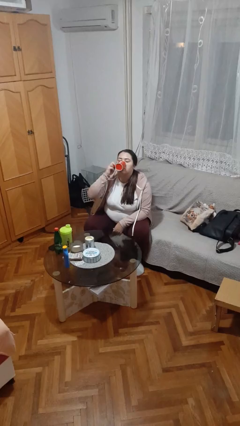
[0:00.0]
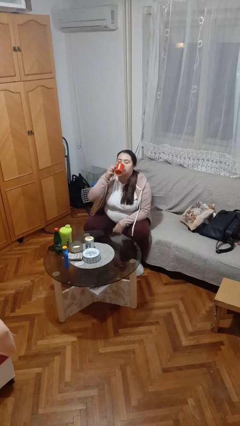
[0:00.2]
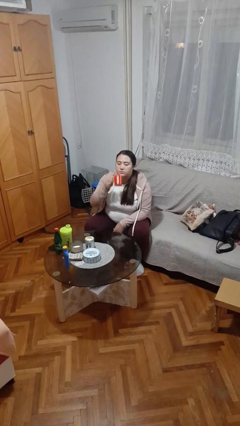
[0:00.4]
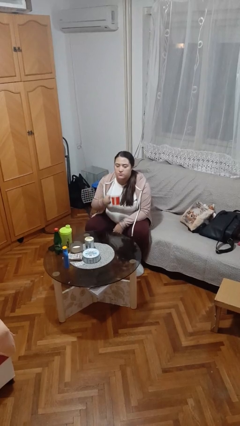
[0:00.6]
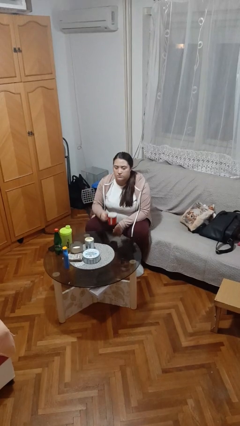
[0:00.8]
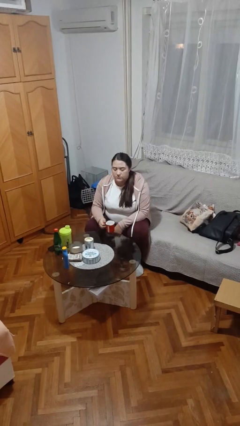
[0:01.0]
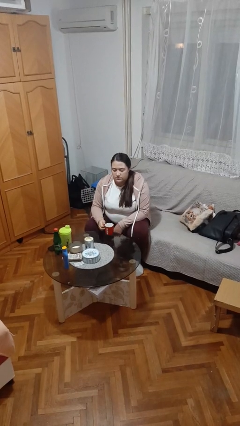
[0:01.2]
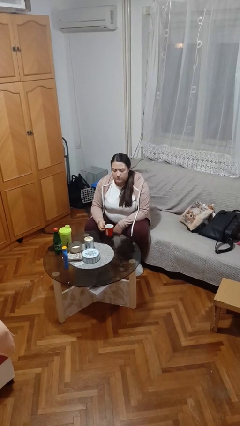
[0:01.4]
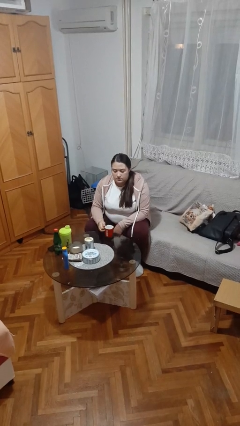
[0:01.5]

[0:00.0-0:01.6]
person puts down object on table

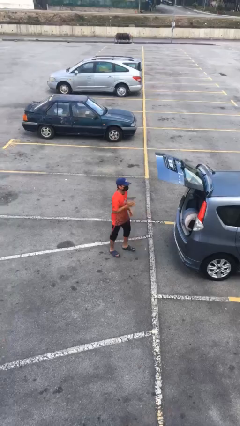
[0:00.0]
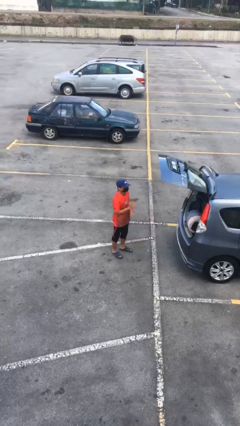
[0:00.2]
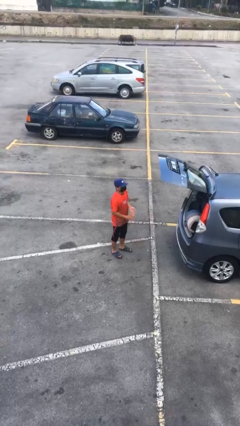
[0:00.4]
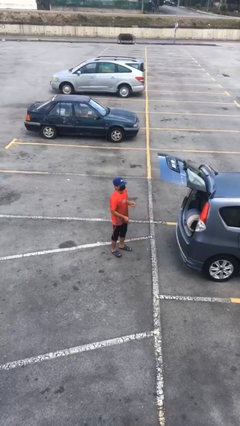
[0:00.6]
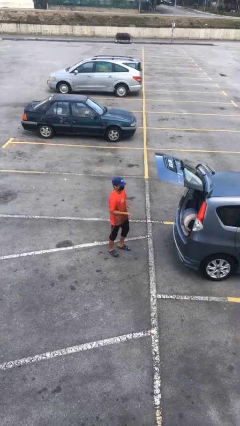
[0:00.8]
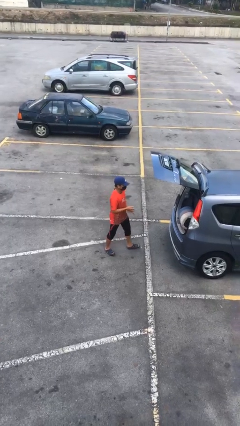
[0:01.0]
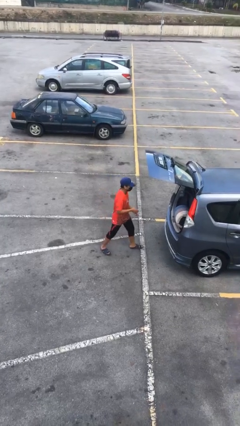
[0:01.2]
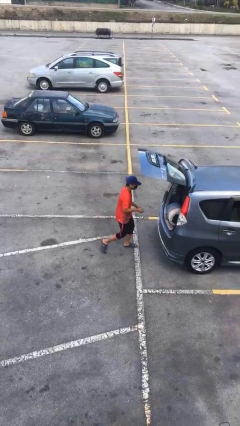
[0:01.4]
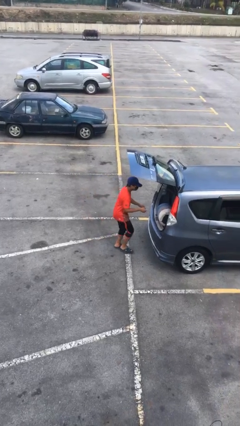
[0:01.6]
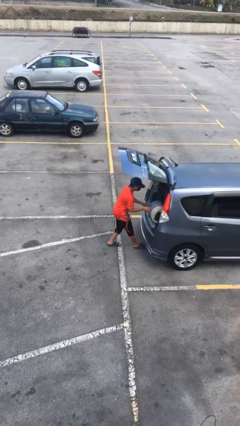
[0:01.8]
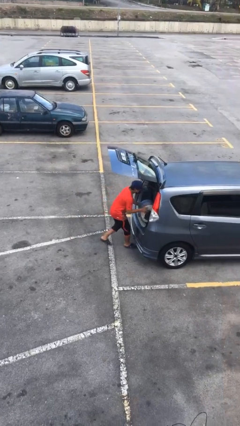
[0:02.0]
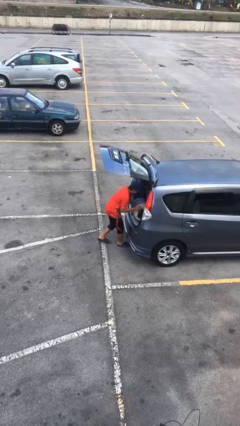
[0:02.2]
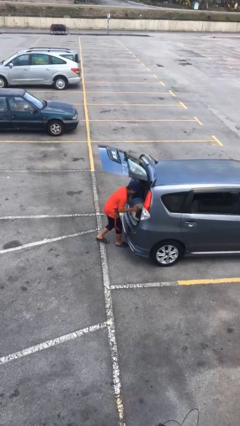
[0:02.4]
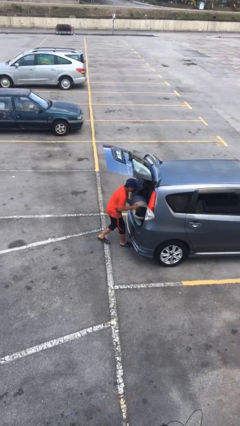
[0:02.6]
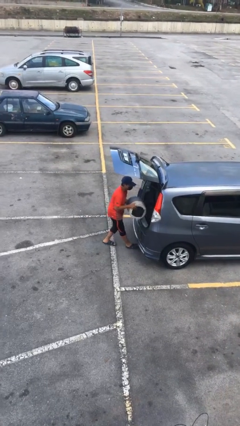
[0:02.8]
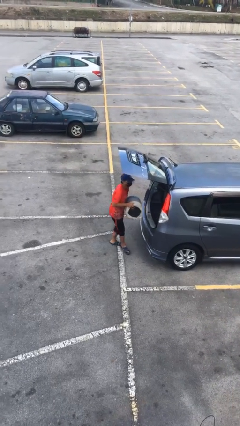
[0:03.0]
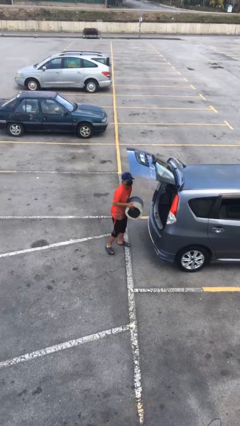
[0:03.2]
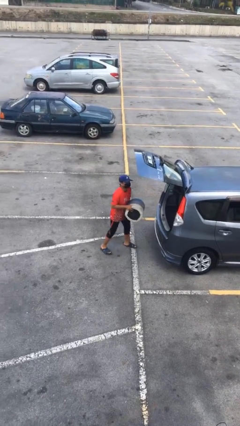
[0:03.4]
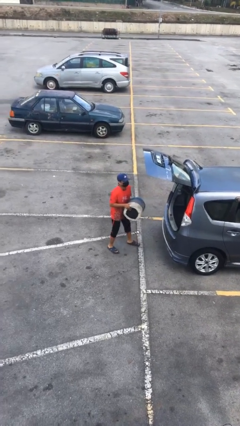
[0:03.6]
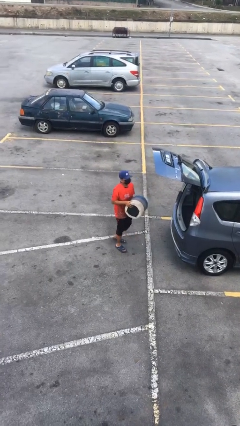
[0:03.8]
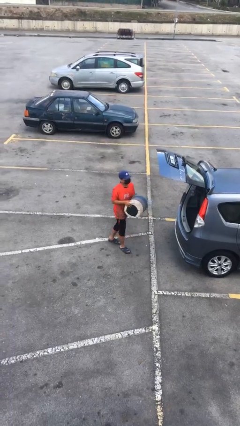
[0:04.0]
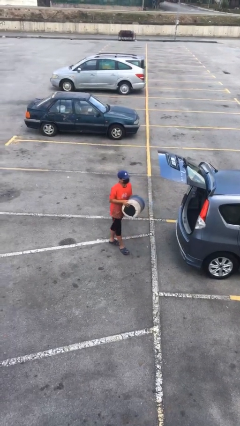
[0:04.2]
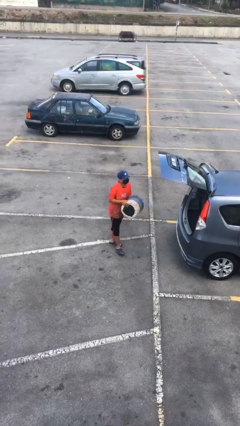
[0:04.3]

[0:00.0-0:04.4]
person unloads car

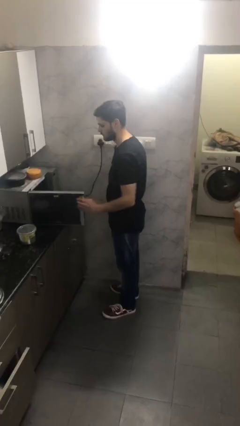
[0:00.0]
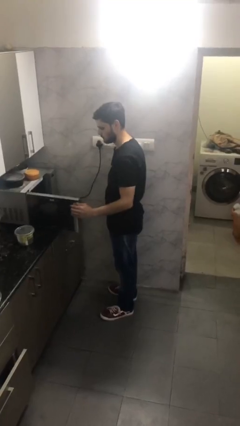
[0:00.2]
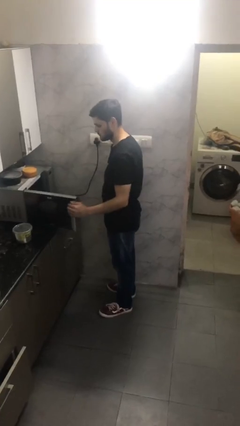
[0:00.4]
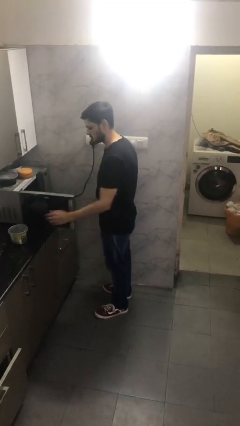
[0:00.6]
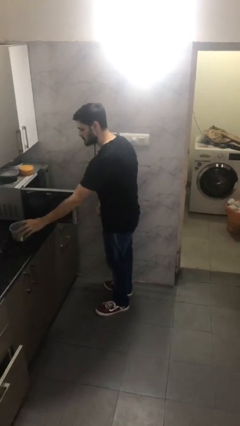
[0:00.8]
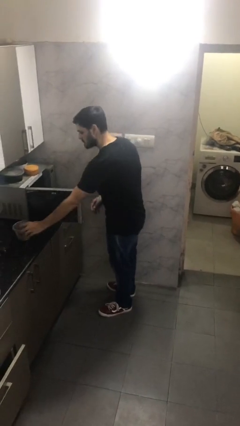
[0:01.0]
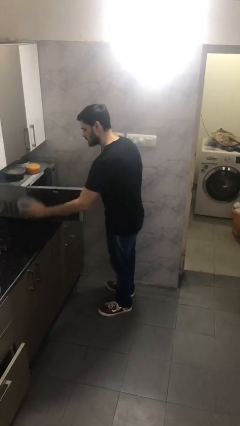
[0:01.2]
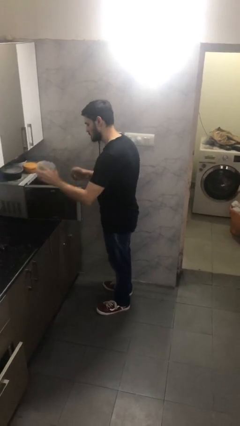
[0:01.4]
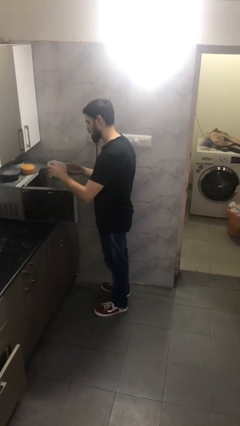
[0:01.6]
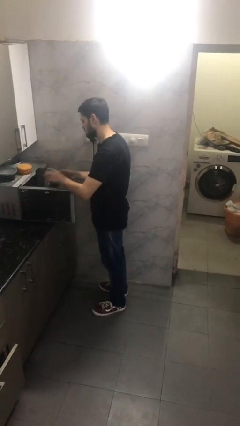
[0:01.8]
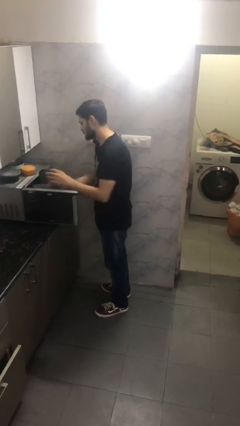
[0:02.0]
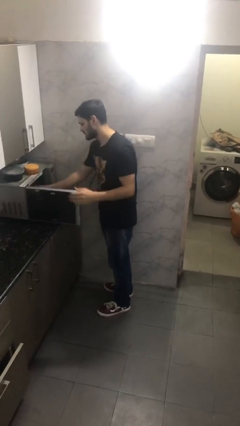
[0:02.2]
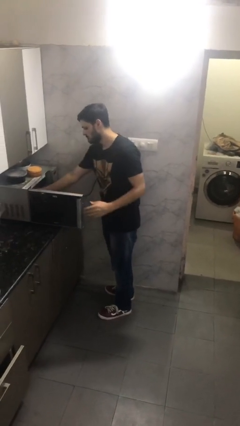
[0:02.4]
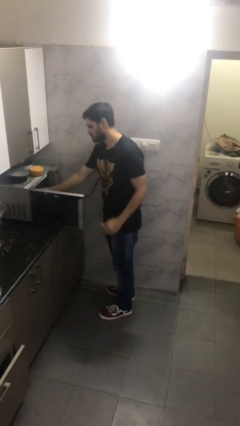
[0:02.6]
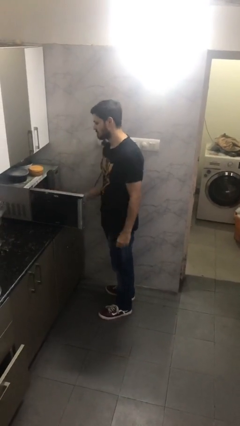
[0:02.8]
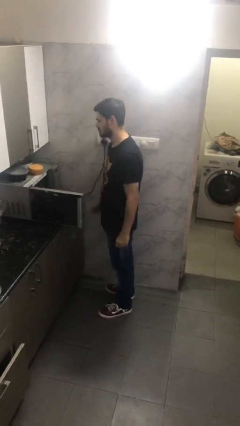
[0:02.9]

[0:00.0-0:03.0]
person puts object into microwave

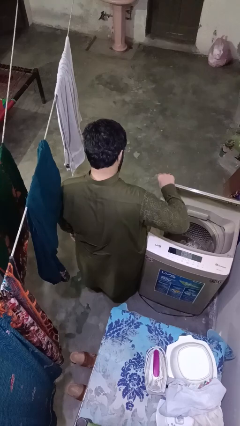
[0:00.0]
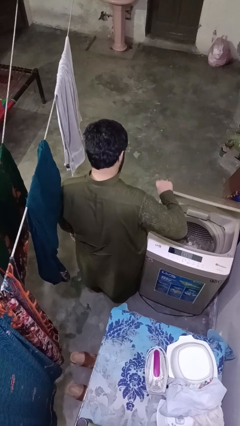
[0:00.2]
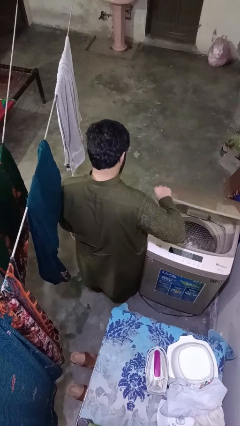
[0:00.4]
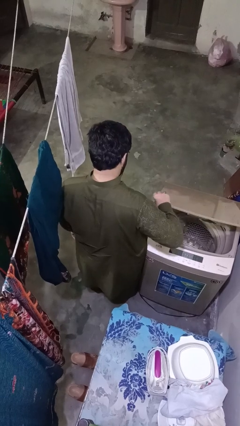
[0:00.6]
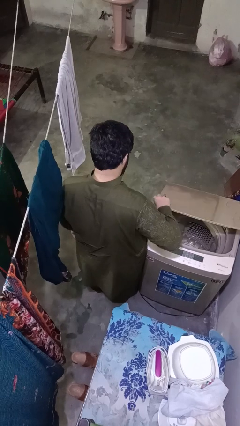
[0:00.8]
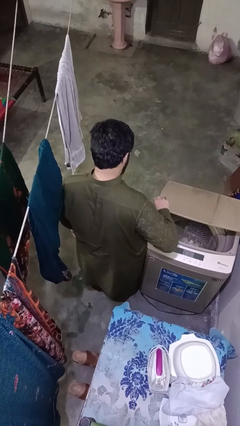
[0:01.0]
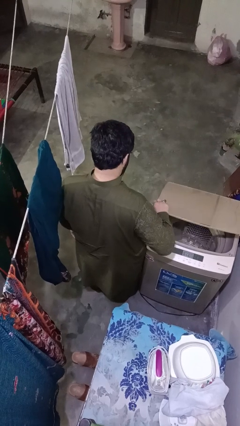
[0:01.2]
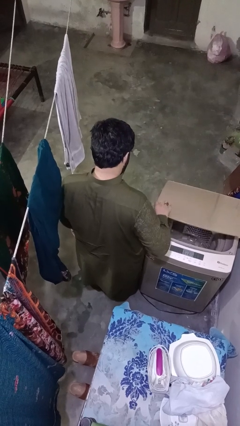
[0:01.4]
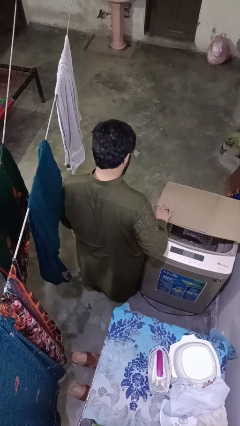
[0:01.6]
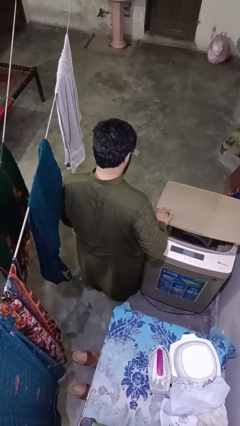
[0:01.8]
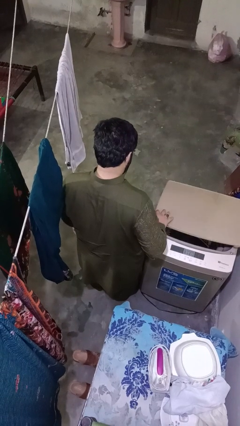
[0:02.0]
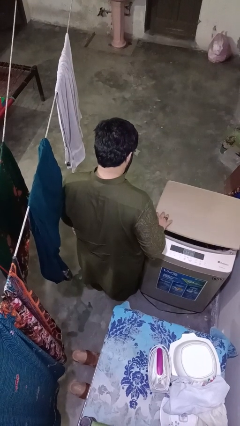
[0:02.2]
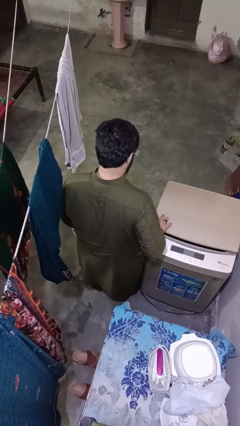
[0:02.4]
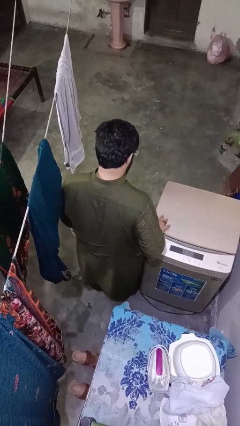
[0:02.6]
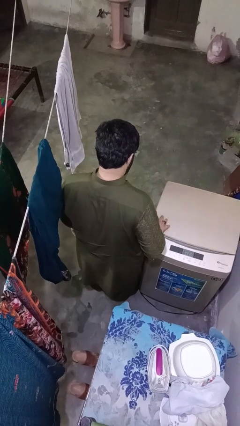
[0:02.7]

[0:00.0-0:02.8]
person closes clothes washer

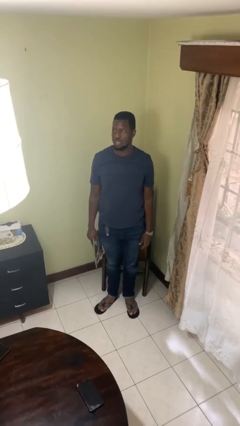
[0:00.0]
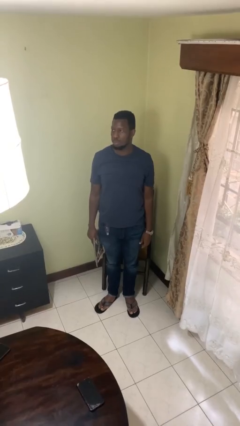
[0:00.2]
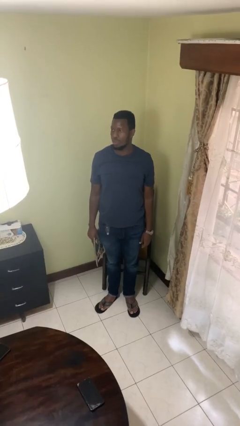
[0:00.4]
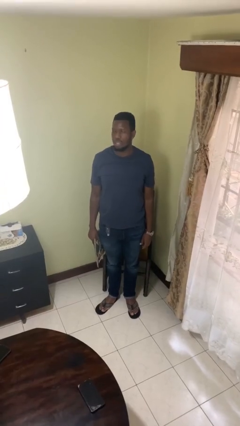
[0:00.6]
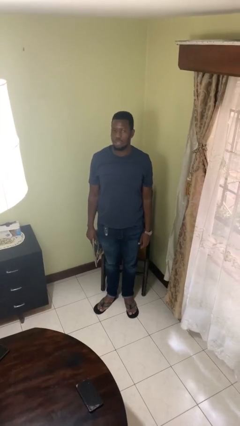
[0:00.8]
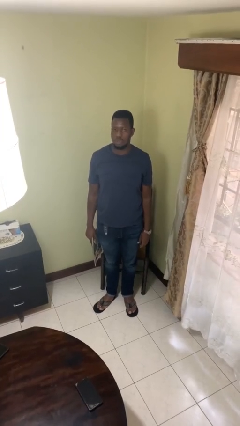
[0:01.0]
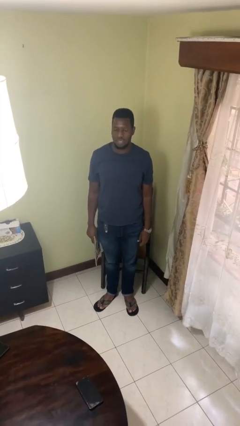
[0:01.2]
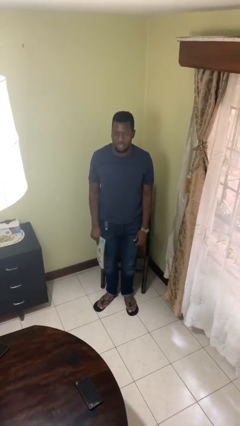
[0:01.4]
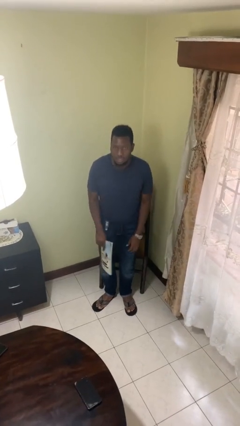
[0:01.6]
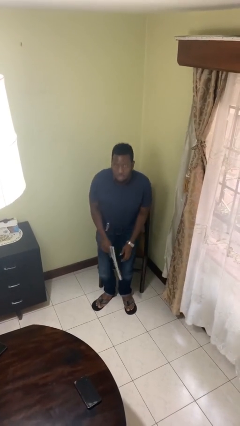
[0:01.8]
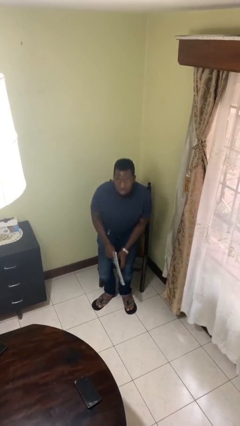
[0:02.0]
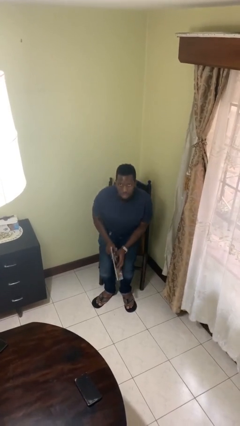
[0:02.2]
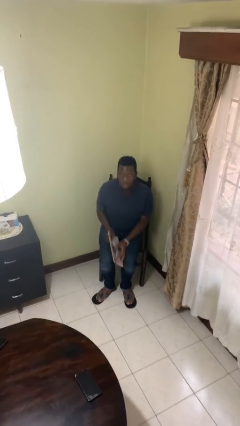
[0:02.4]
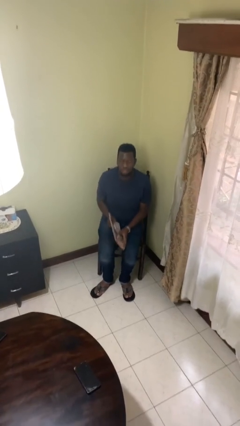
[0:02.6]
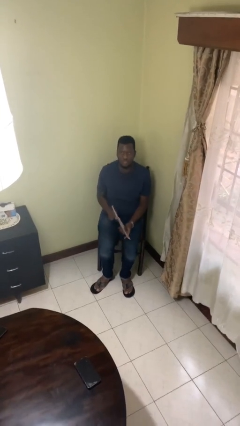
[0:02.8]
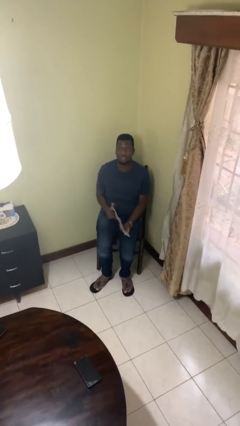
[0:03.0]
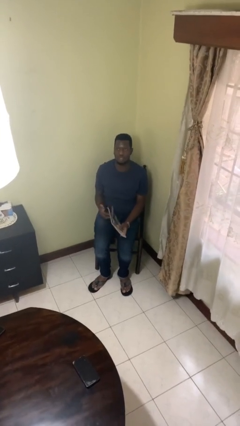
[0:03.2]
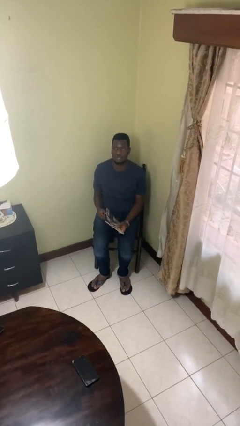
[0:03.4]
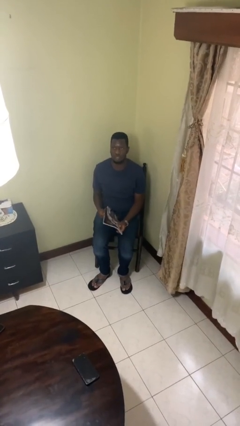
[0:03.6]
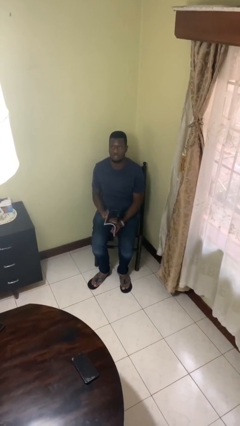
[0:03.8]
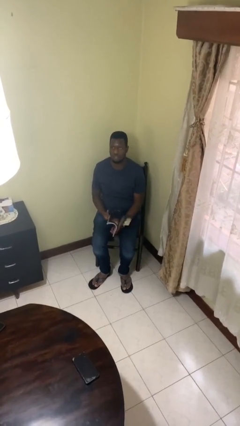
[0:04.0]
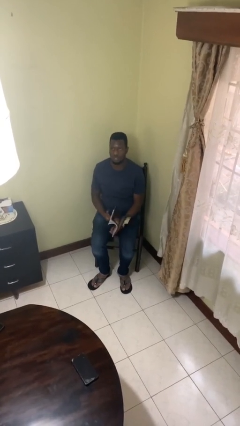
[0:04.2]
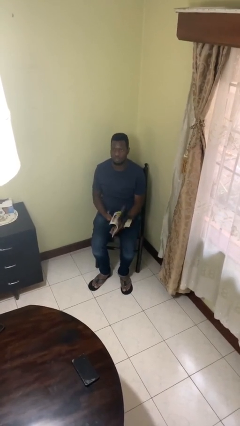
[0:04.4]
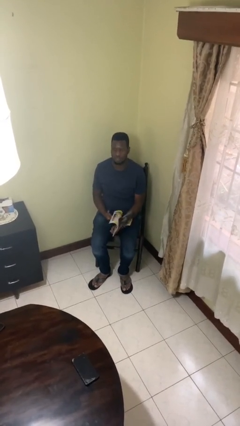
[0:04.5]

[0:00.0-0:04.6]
person sits down

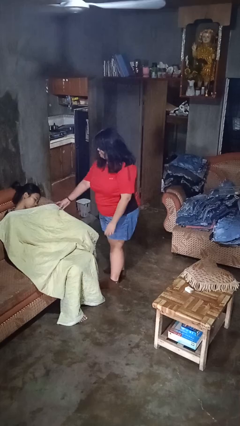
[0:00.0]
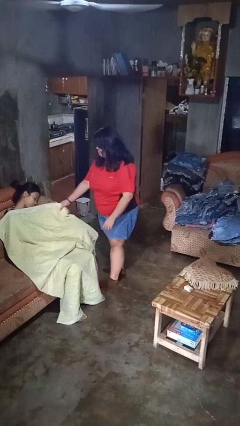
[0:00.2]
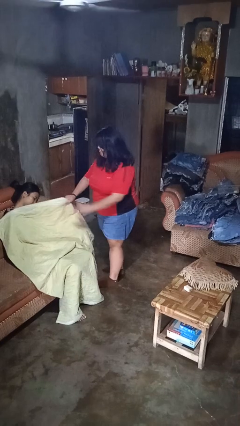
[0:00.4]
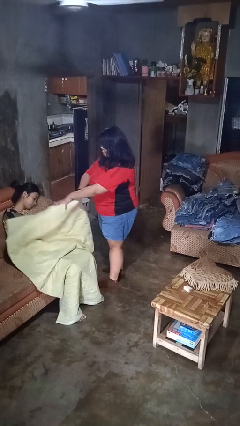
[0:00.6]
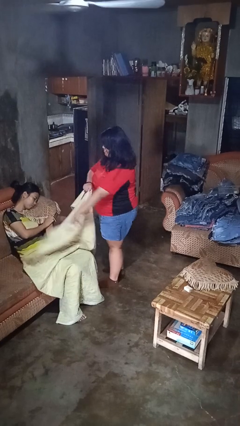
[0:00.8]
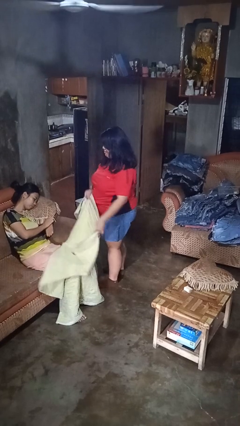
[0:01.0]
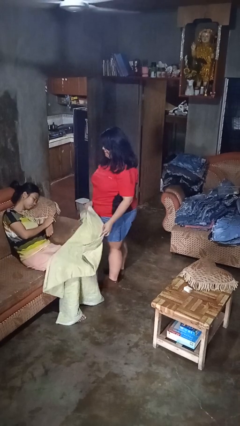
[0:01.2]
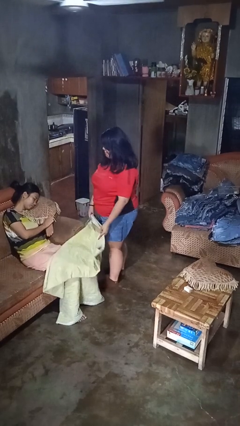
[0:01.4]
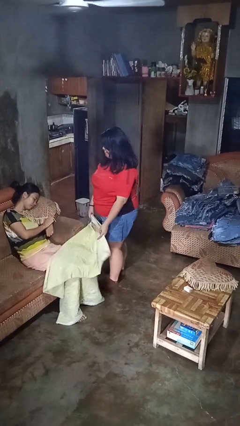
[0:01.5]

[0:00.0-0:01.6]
person uncovers friend with blanket
